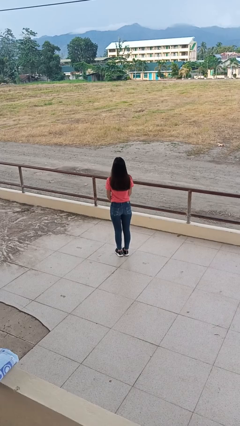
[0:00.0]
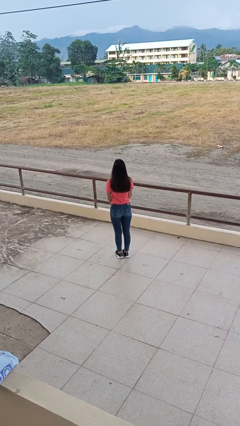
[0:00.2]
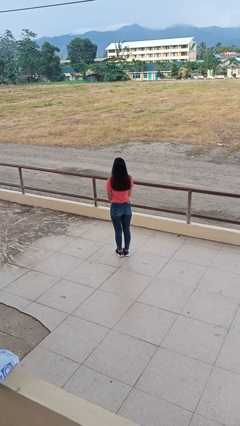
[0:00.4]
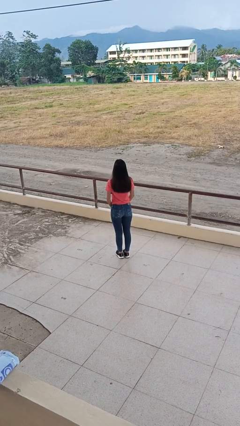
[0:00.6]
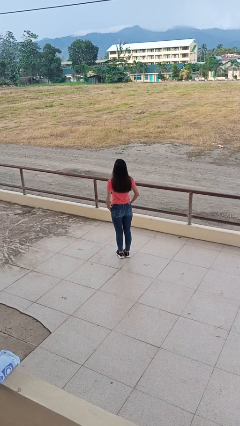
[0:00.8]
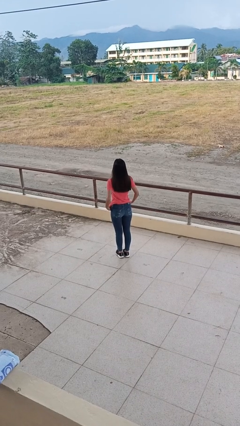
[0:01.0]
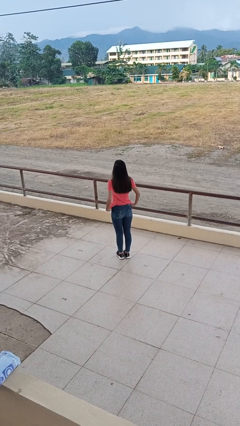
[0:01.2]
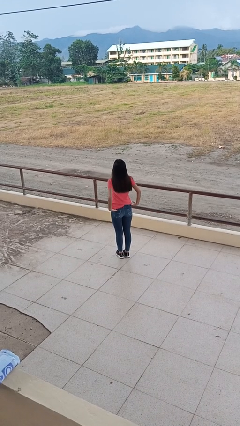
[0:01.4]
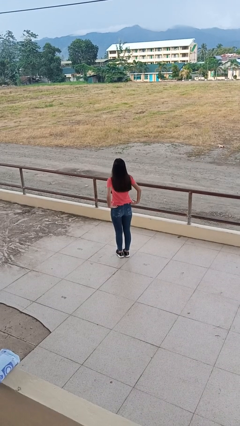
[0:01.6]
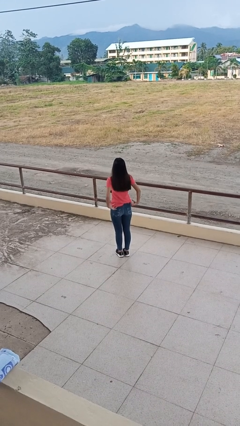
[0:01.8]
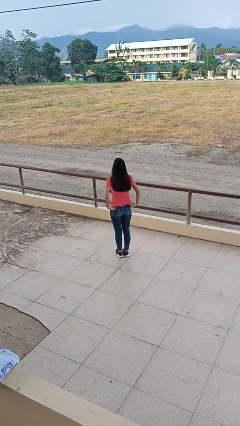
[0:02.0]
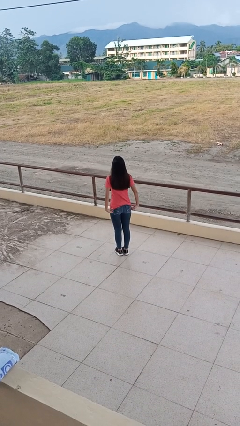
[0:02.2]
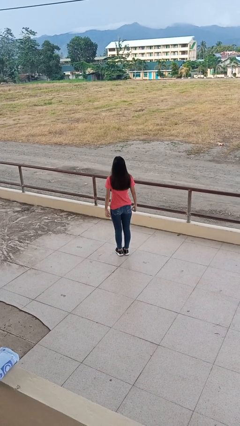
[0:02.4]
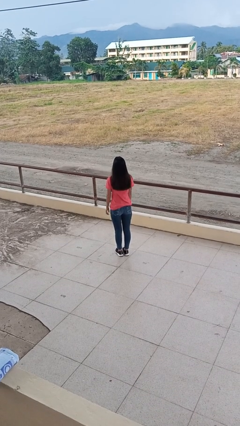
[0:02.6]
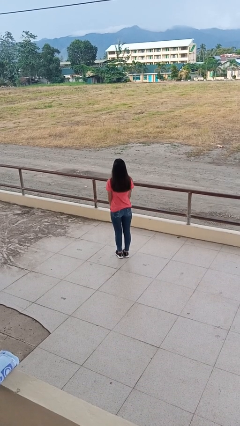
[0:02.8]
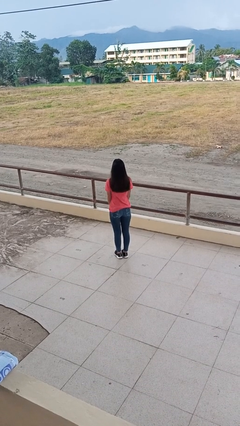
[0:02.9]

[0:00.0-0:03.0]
person untucks shirt

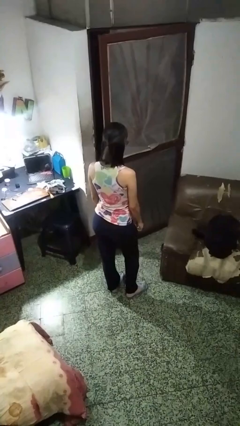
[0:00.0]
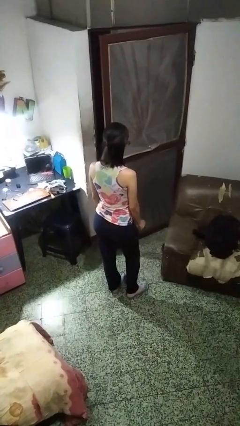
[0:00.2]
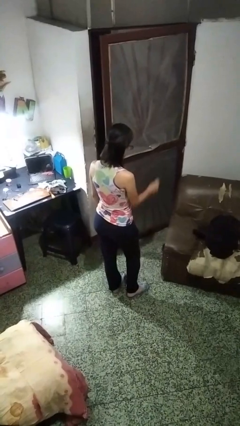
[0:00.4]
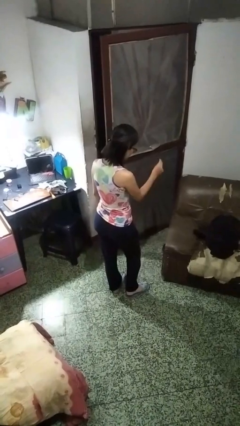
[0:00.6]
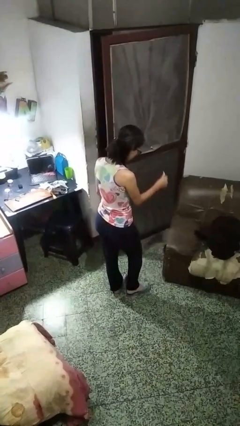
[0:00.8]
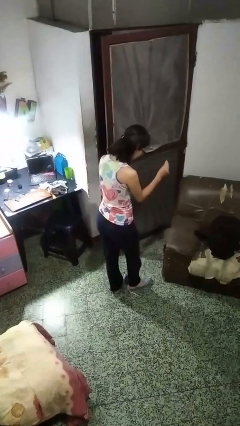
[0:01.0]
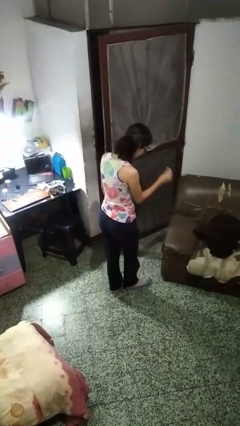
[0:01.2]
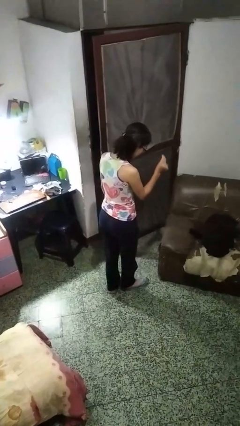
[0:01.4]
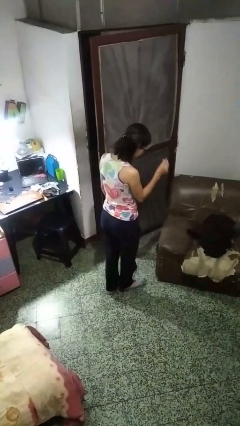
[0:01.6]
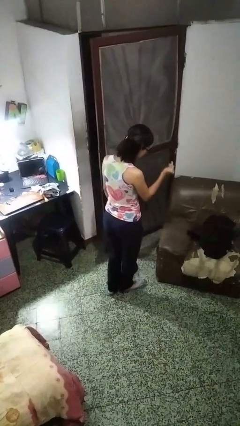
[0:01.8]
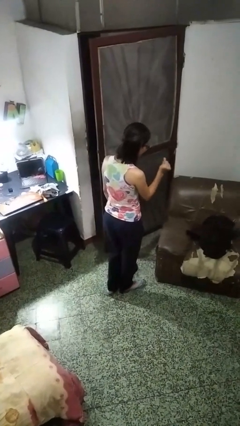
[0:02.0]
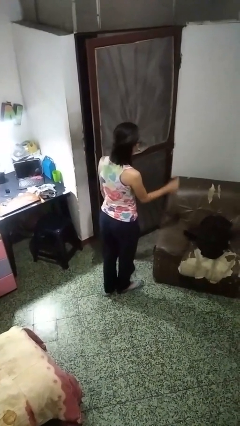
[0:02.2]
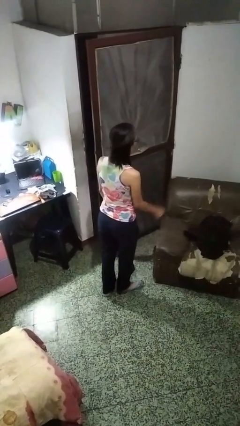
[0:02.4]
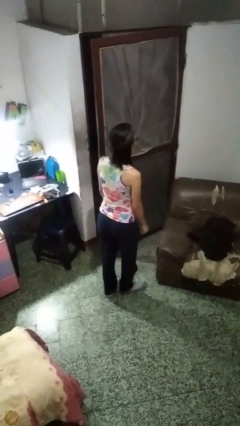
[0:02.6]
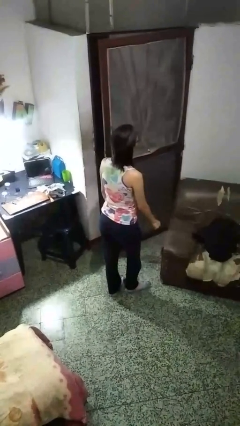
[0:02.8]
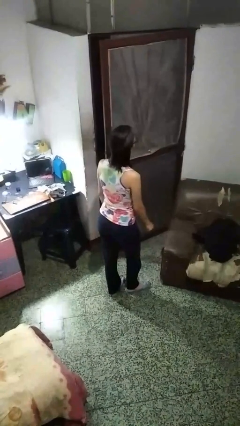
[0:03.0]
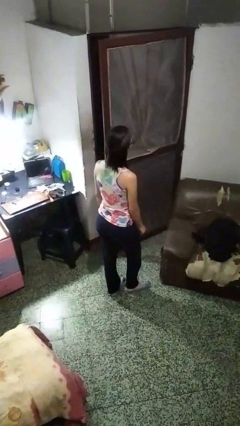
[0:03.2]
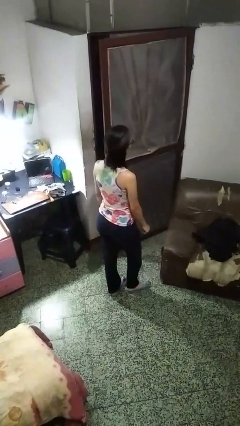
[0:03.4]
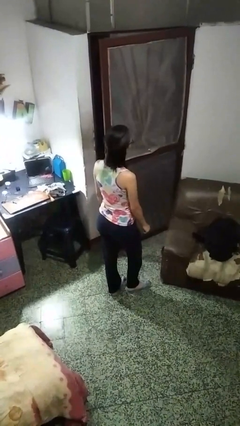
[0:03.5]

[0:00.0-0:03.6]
person snaps fingers

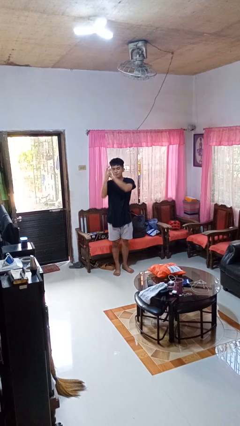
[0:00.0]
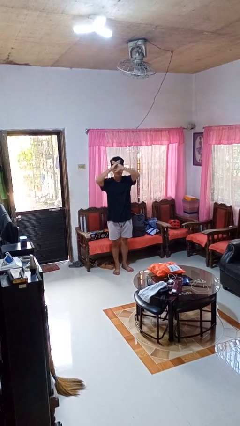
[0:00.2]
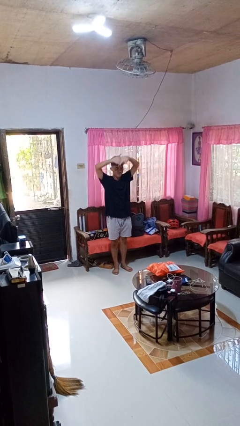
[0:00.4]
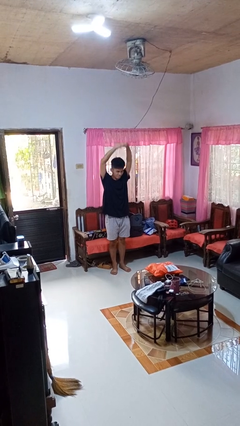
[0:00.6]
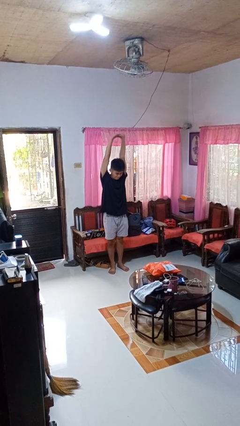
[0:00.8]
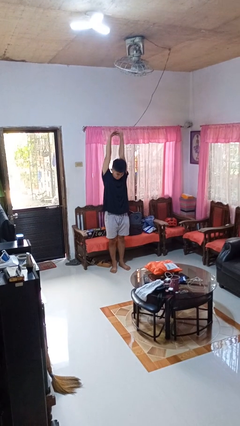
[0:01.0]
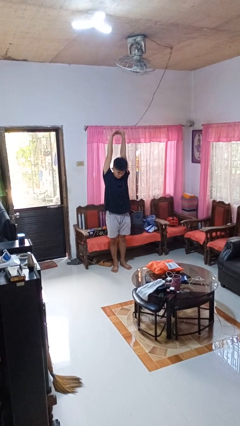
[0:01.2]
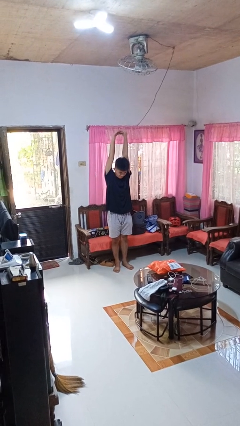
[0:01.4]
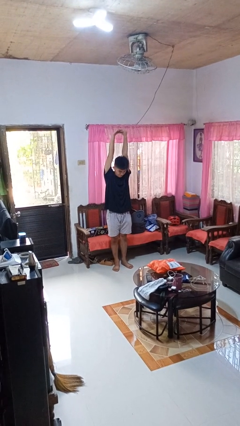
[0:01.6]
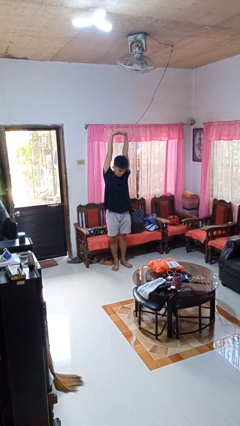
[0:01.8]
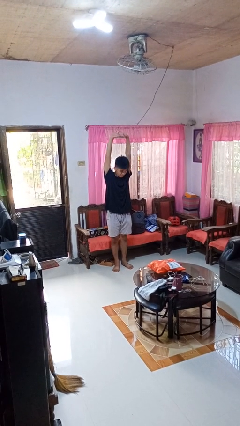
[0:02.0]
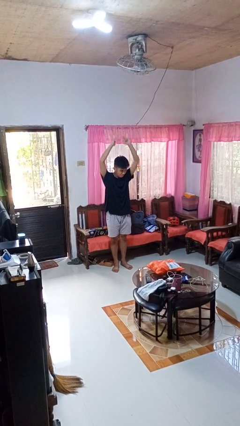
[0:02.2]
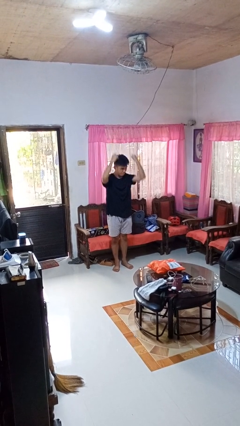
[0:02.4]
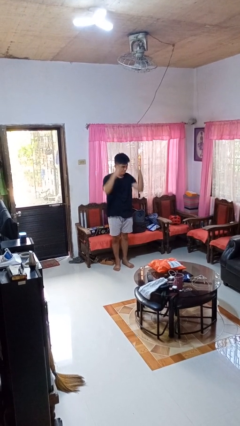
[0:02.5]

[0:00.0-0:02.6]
person stretches arms over head

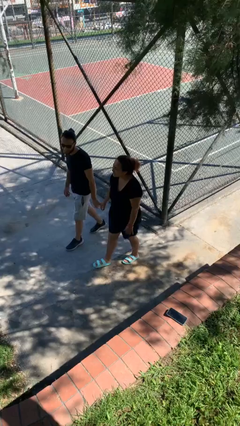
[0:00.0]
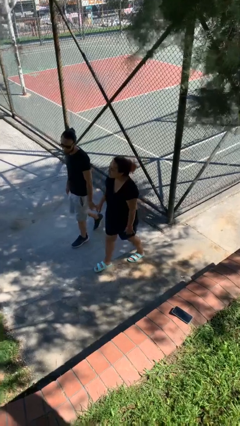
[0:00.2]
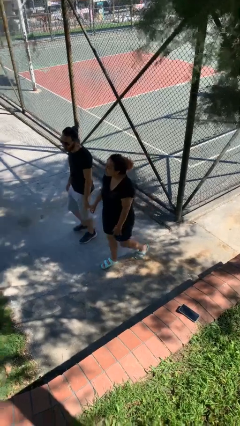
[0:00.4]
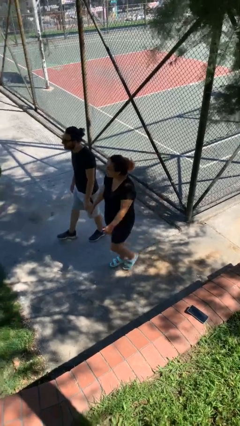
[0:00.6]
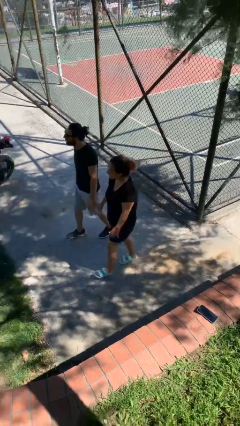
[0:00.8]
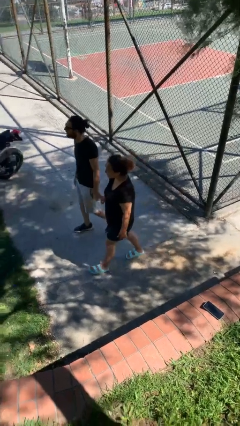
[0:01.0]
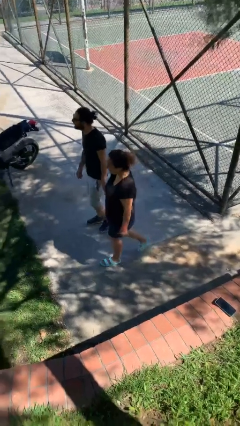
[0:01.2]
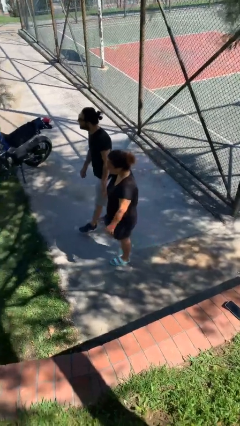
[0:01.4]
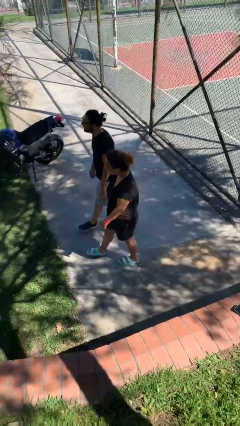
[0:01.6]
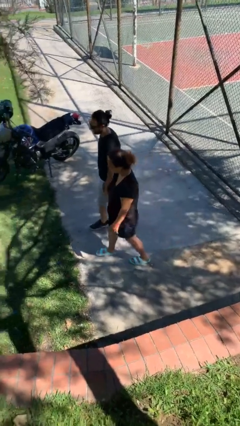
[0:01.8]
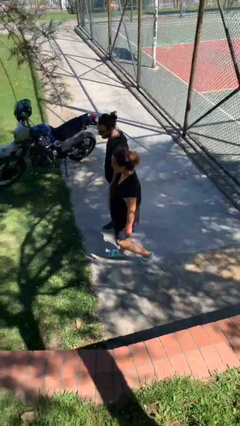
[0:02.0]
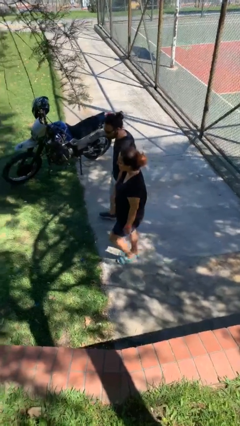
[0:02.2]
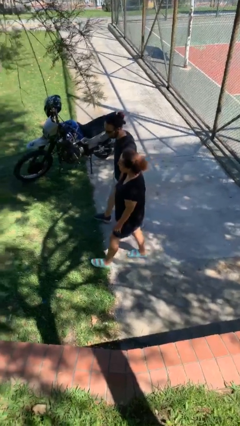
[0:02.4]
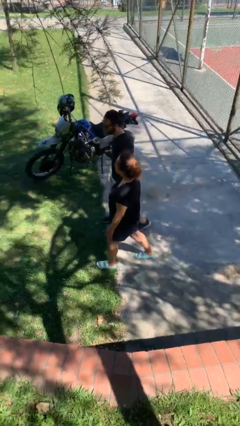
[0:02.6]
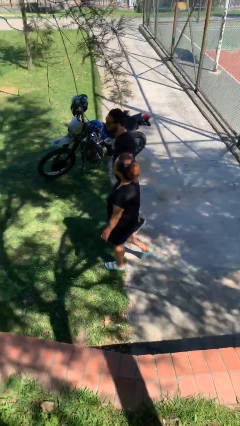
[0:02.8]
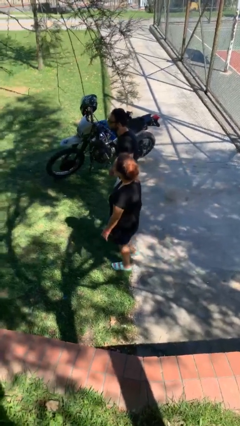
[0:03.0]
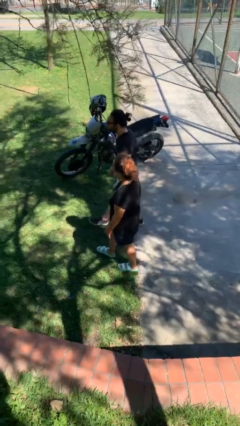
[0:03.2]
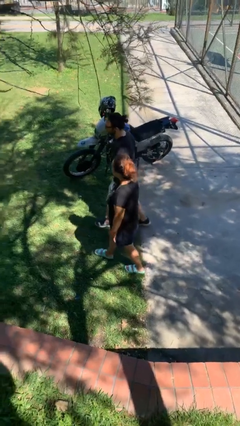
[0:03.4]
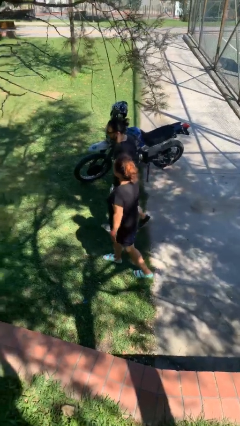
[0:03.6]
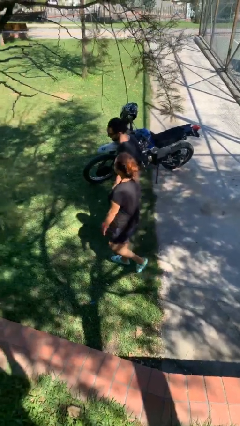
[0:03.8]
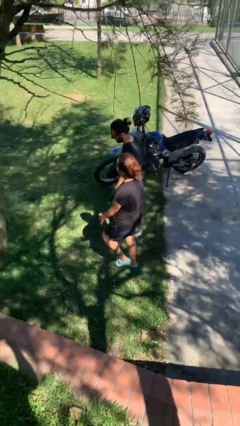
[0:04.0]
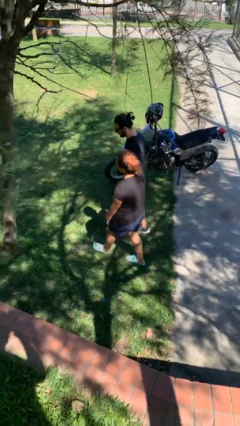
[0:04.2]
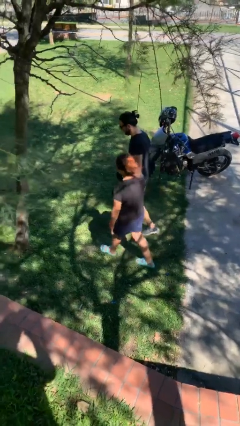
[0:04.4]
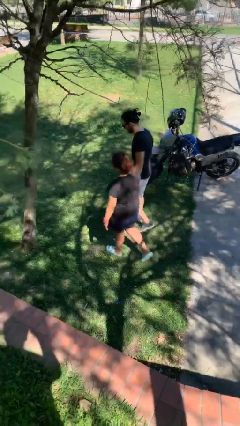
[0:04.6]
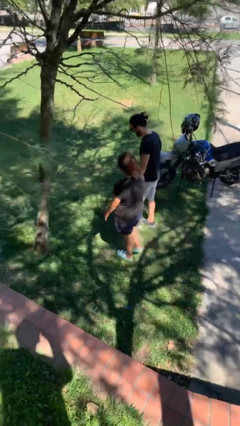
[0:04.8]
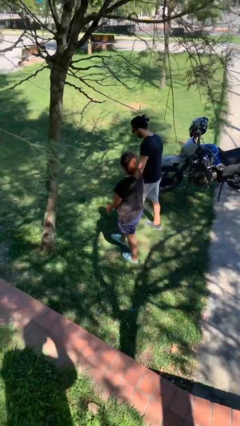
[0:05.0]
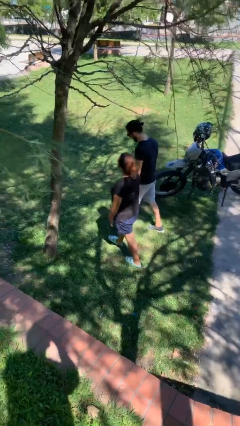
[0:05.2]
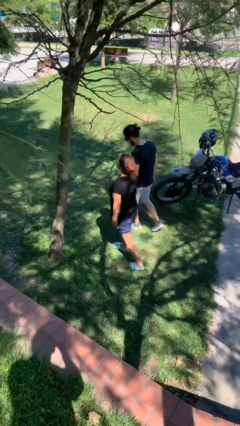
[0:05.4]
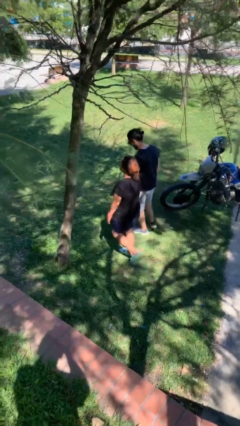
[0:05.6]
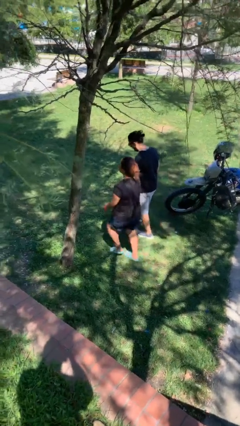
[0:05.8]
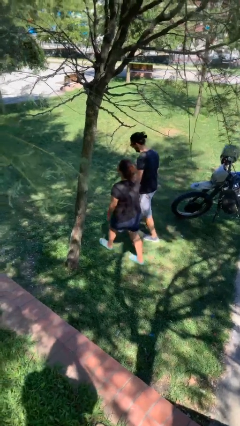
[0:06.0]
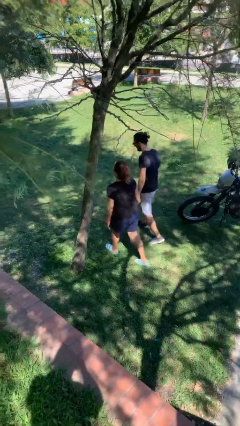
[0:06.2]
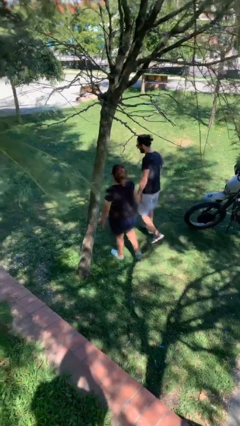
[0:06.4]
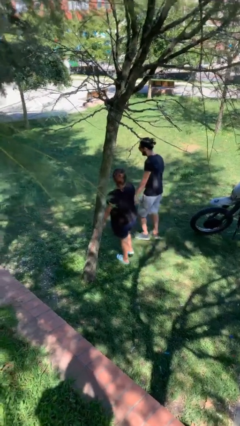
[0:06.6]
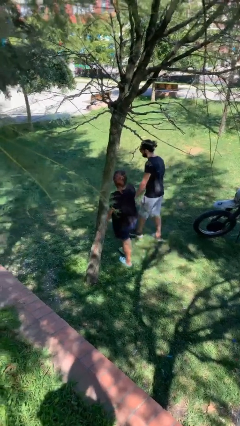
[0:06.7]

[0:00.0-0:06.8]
person holds hand

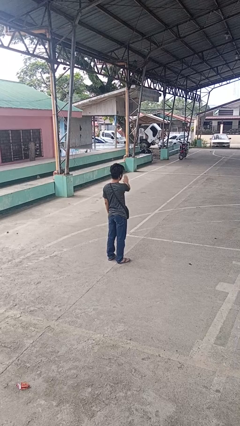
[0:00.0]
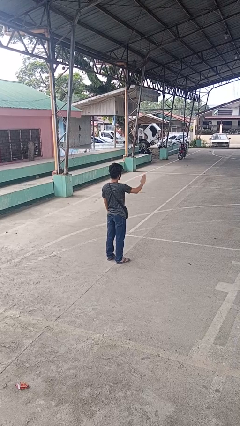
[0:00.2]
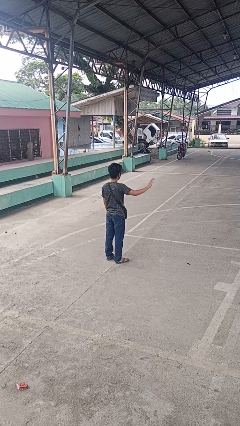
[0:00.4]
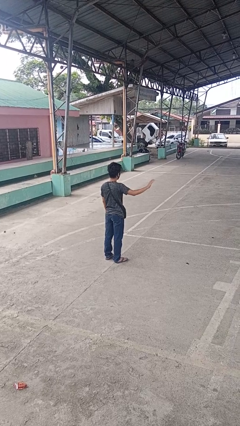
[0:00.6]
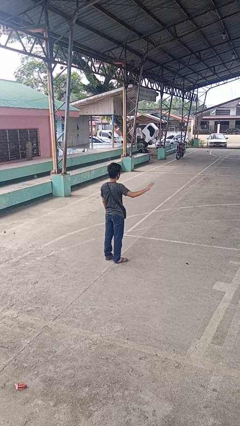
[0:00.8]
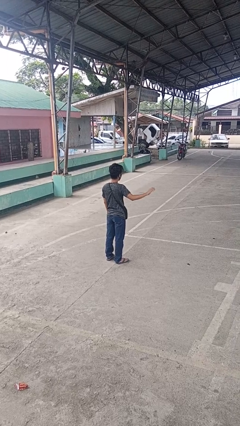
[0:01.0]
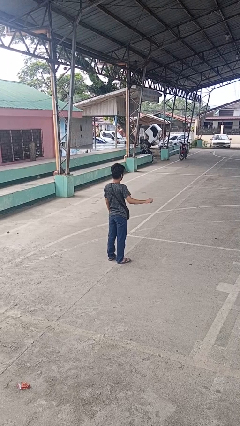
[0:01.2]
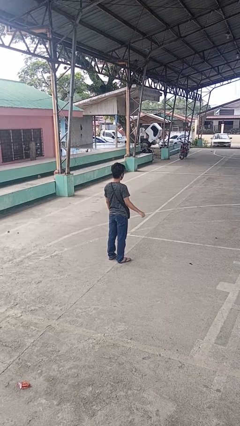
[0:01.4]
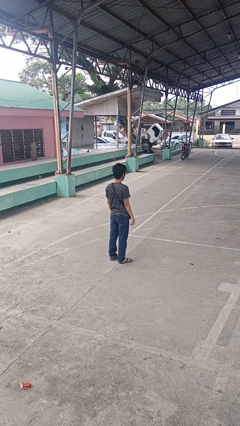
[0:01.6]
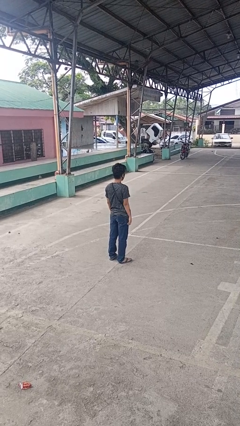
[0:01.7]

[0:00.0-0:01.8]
person gestures swipe right
